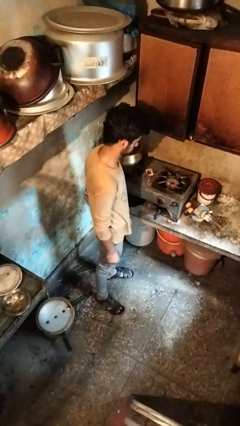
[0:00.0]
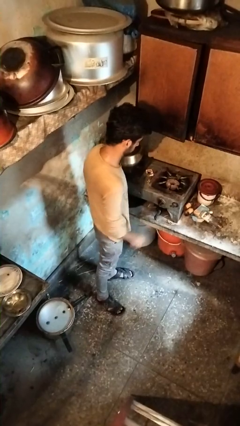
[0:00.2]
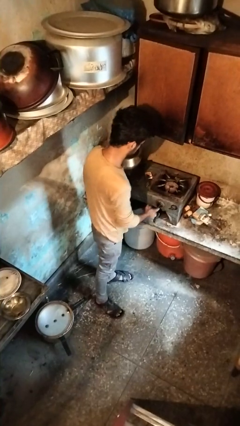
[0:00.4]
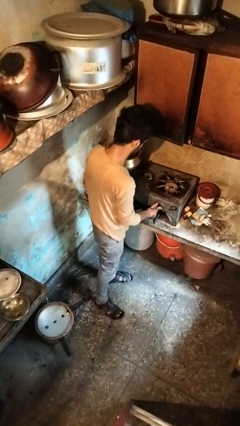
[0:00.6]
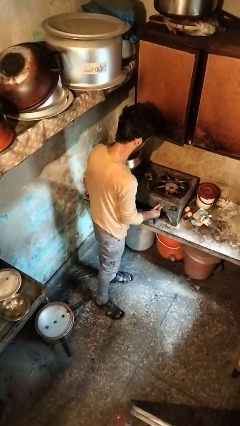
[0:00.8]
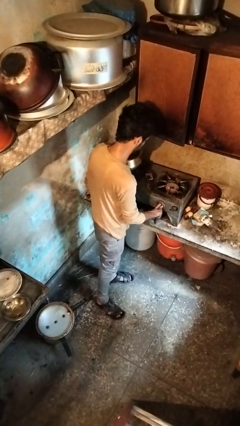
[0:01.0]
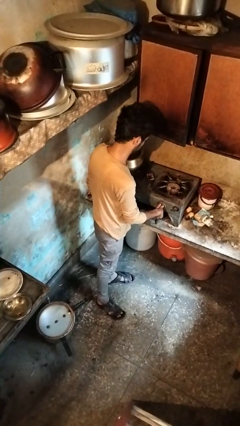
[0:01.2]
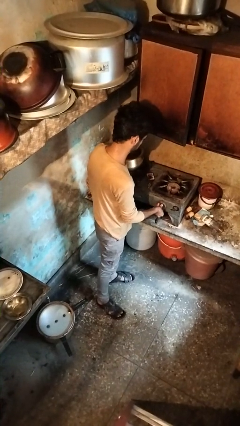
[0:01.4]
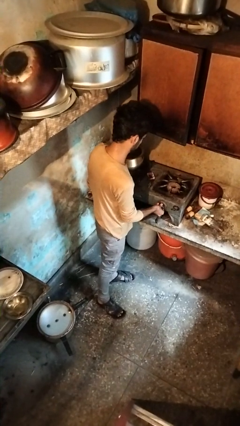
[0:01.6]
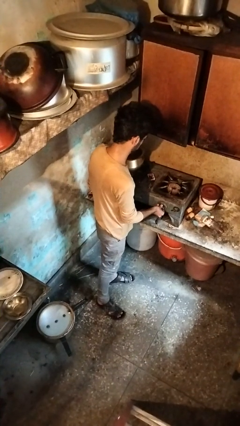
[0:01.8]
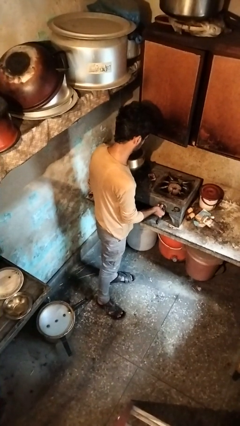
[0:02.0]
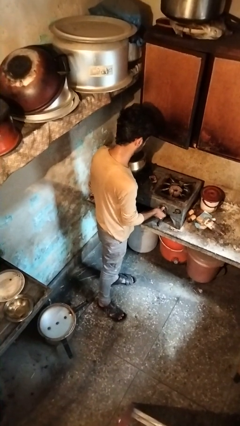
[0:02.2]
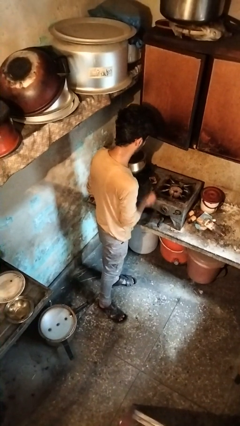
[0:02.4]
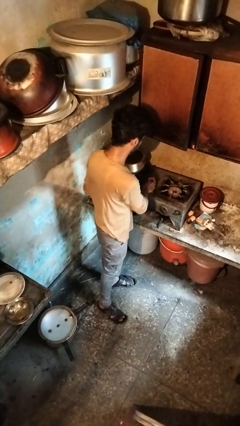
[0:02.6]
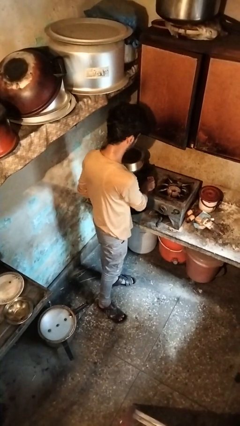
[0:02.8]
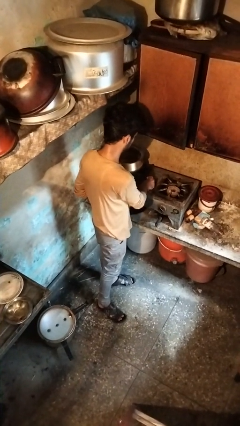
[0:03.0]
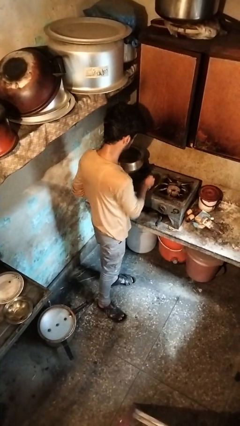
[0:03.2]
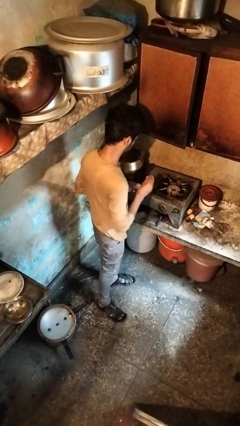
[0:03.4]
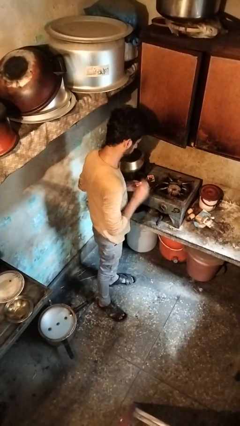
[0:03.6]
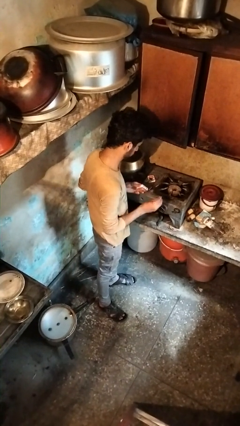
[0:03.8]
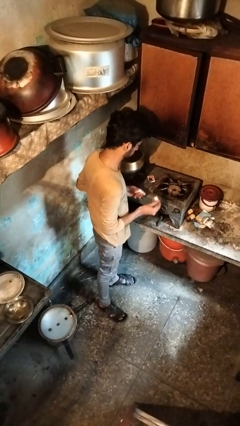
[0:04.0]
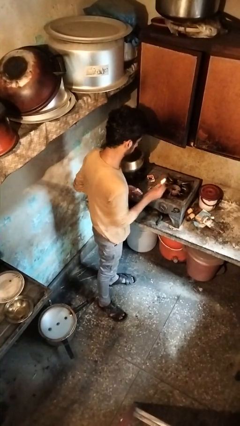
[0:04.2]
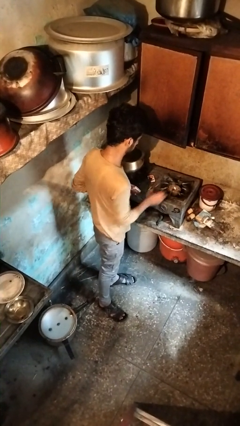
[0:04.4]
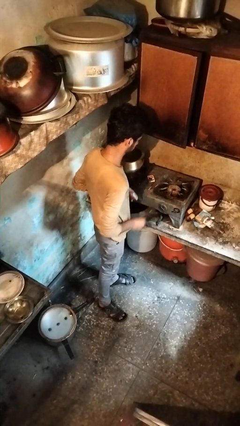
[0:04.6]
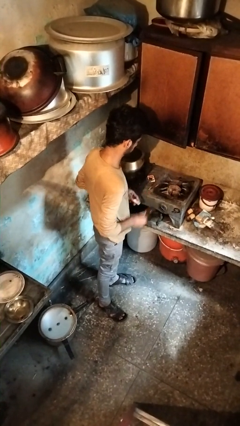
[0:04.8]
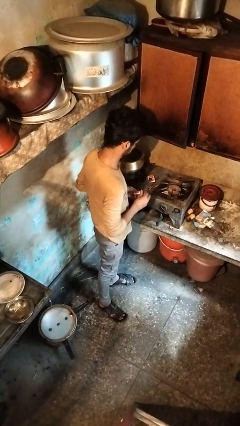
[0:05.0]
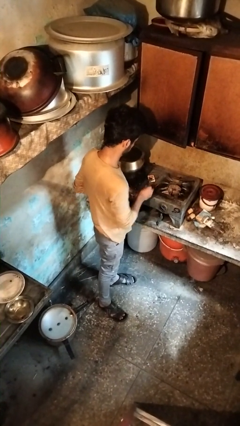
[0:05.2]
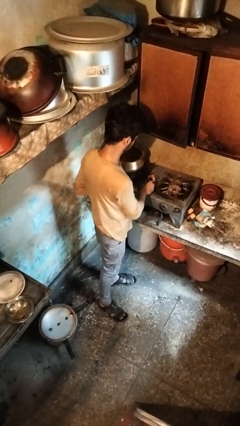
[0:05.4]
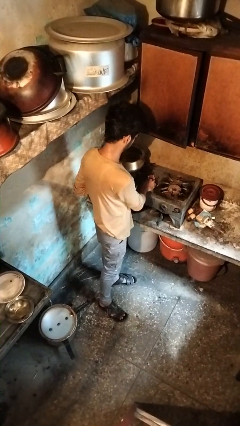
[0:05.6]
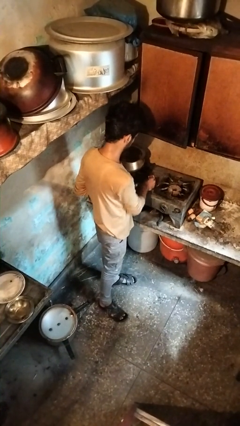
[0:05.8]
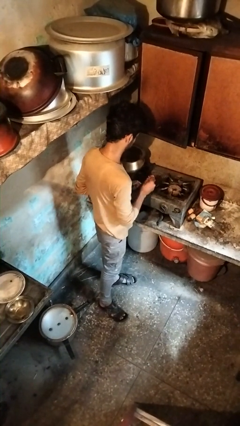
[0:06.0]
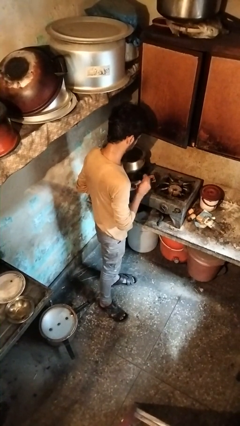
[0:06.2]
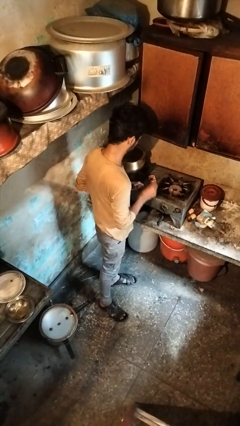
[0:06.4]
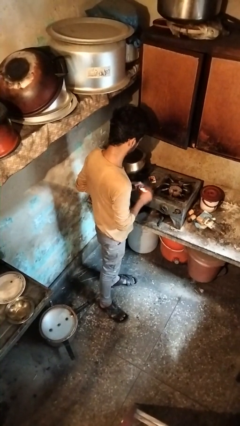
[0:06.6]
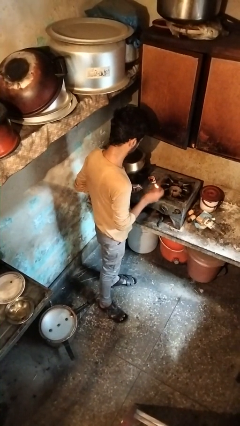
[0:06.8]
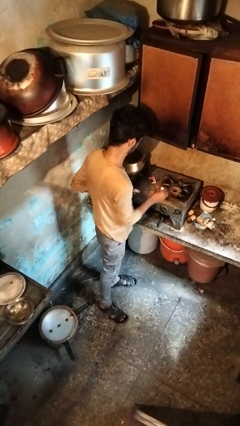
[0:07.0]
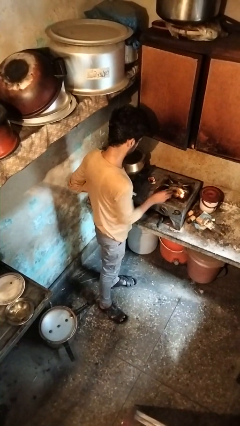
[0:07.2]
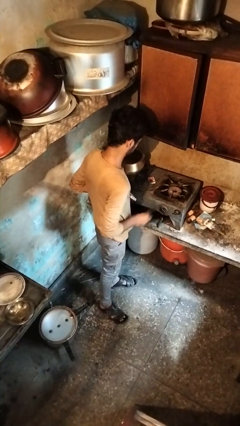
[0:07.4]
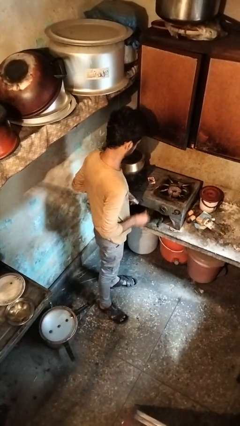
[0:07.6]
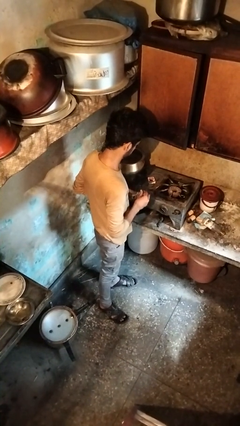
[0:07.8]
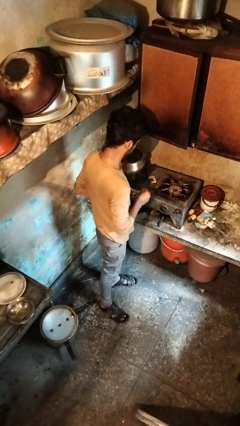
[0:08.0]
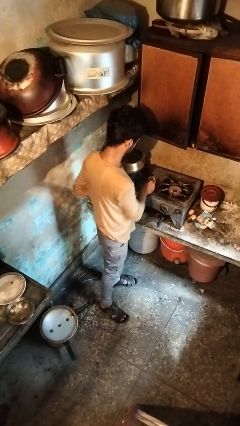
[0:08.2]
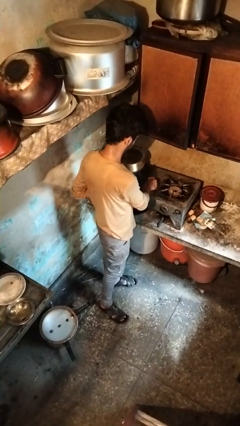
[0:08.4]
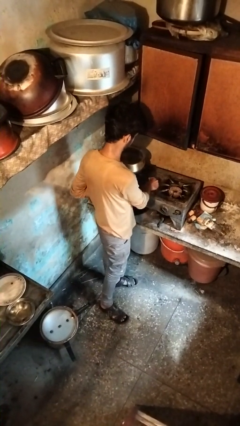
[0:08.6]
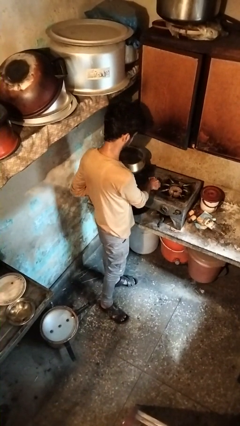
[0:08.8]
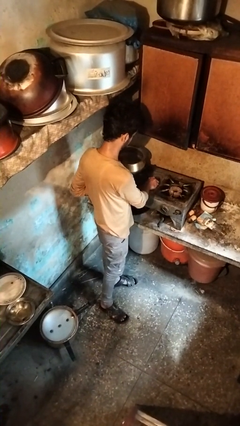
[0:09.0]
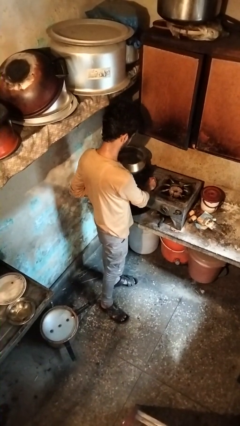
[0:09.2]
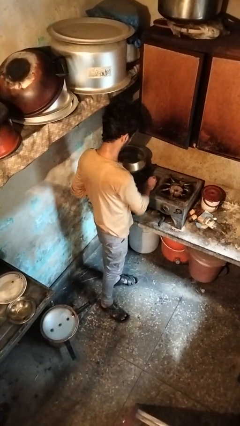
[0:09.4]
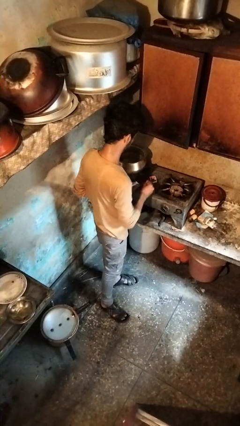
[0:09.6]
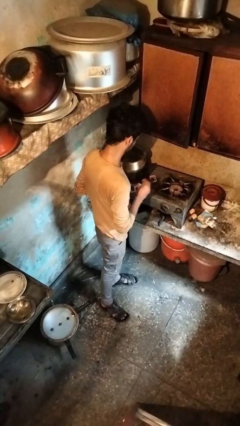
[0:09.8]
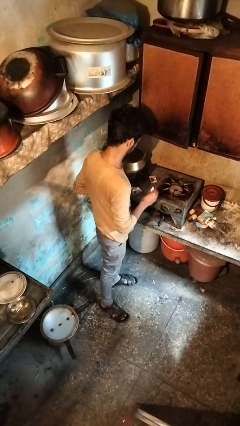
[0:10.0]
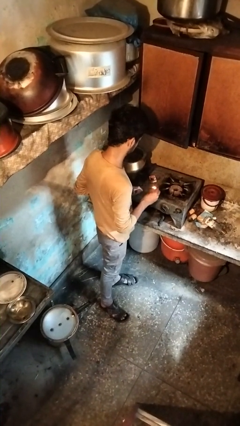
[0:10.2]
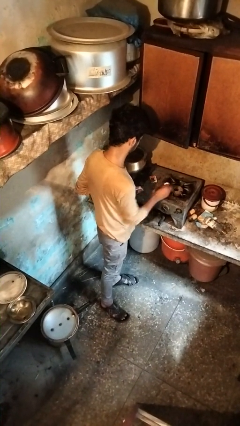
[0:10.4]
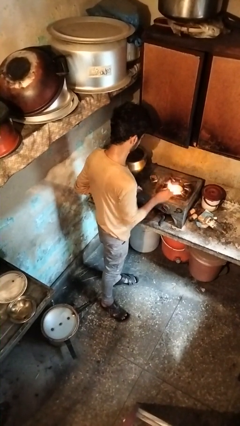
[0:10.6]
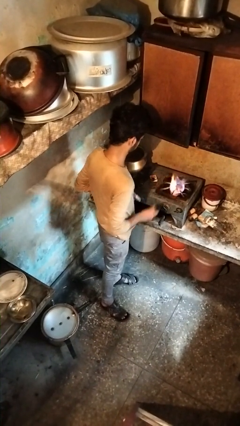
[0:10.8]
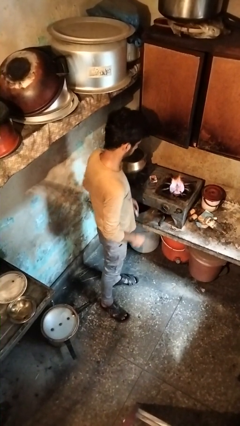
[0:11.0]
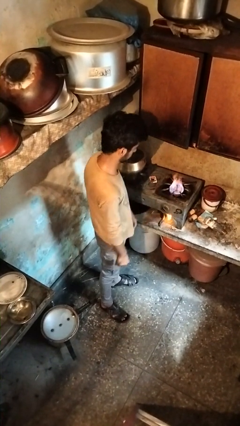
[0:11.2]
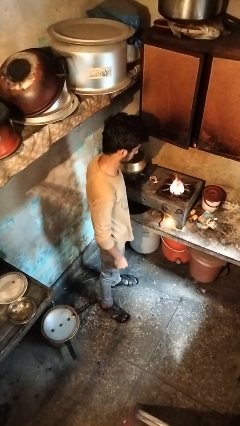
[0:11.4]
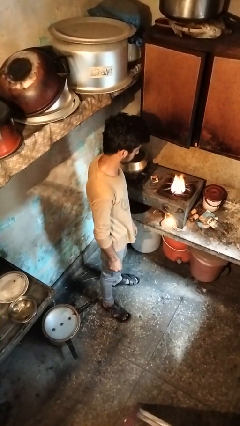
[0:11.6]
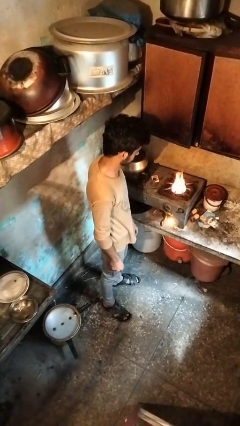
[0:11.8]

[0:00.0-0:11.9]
person turns on stovetop

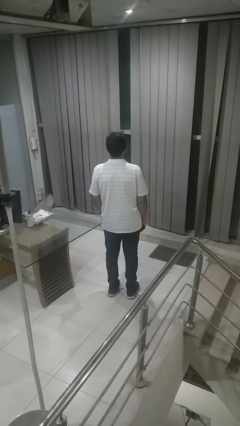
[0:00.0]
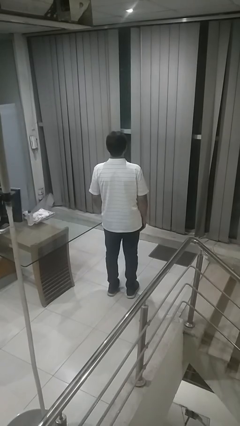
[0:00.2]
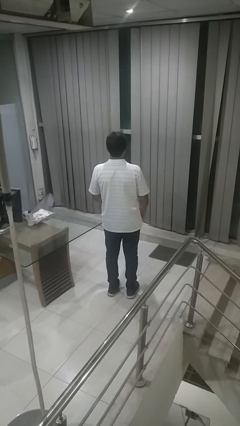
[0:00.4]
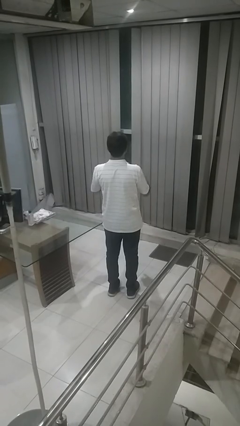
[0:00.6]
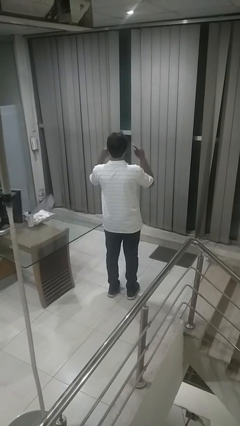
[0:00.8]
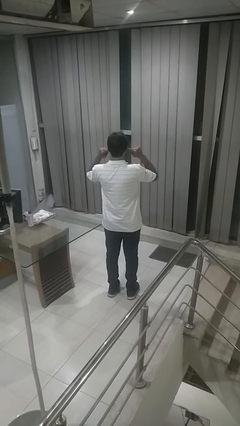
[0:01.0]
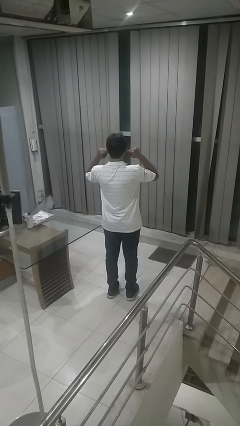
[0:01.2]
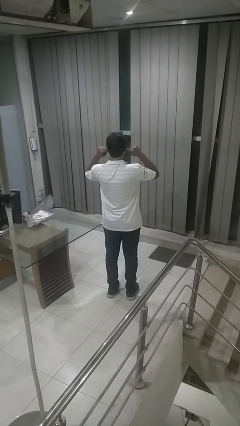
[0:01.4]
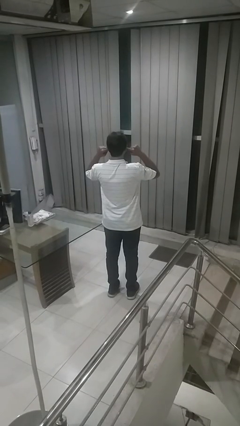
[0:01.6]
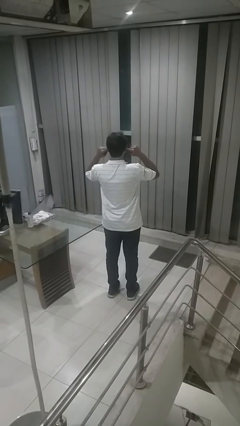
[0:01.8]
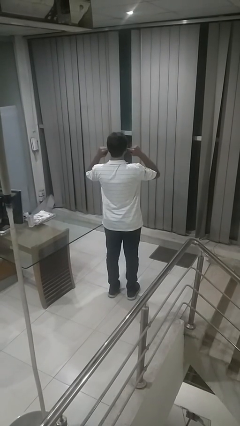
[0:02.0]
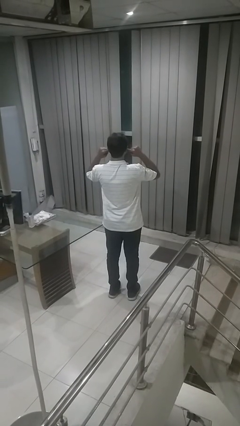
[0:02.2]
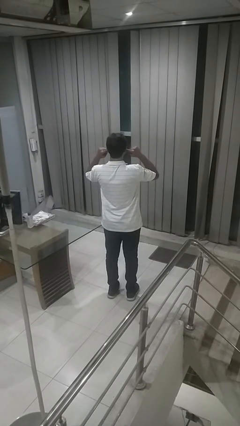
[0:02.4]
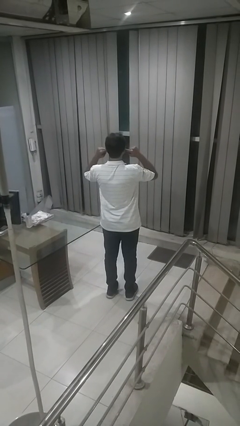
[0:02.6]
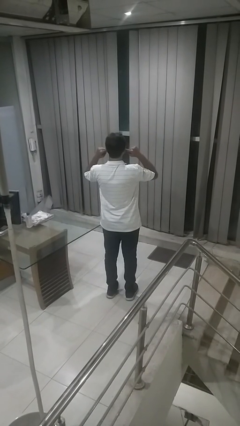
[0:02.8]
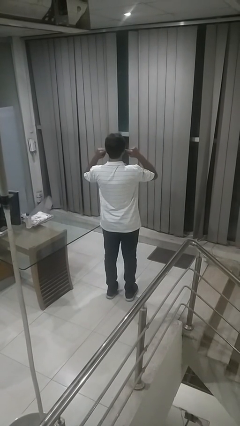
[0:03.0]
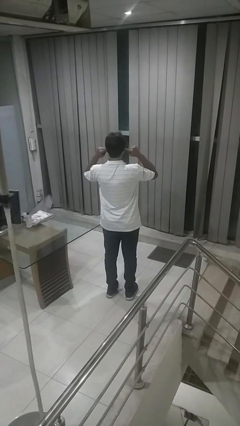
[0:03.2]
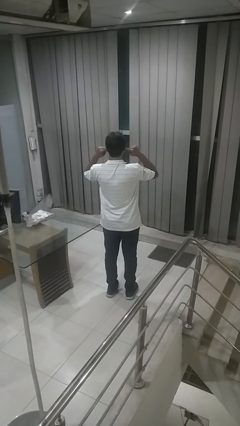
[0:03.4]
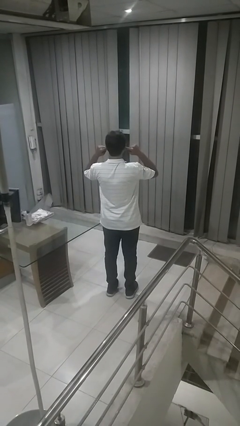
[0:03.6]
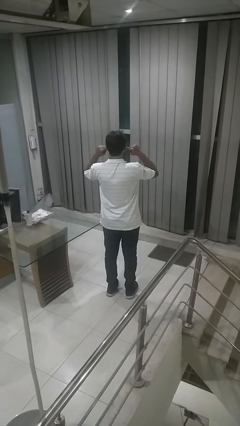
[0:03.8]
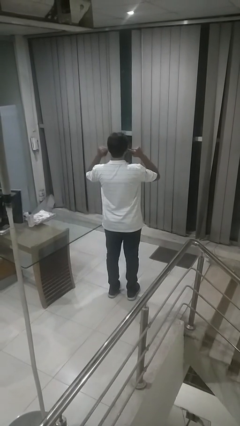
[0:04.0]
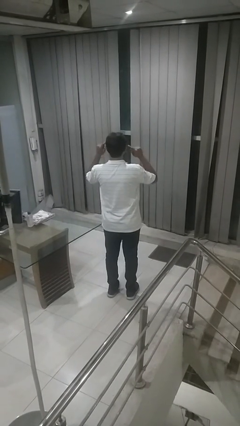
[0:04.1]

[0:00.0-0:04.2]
person puts fingers in ear

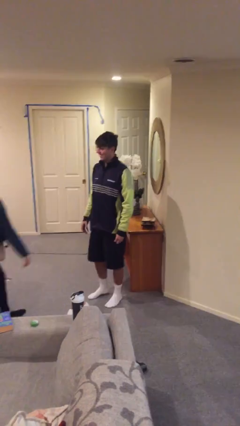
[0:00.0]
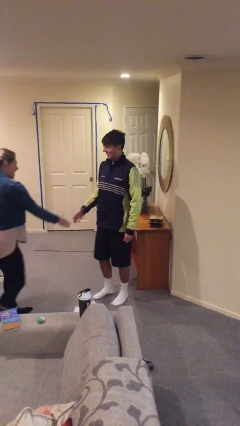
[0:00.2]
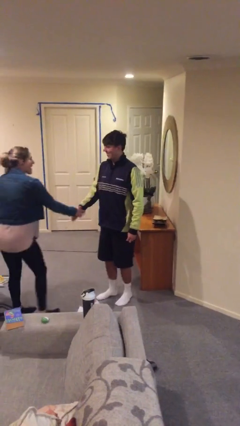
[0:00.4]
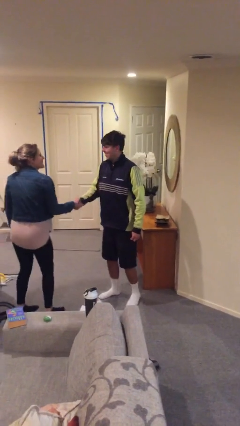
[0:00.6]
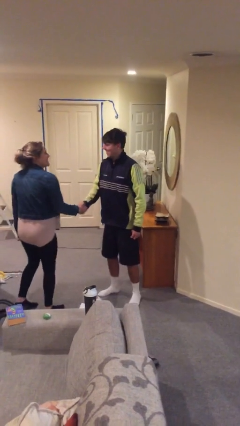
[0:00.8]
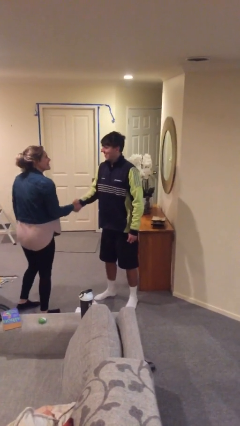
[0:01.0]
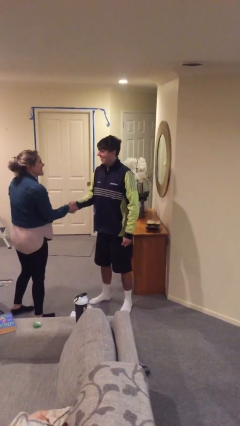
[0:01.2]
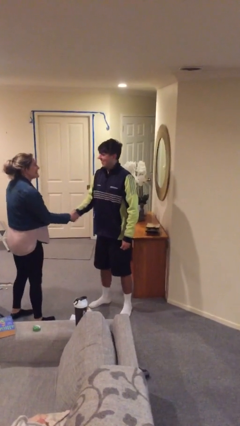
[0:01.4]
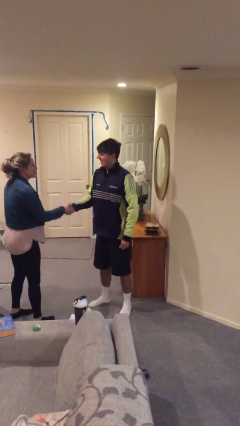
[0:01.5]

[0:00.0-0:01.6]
person shakes hand

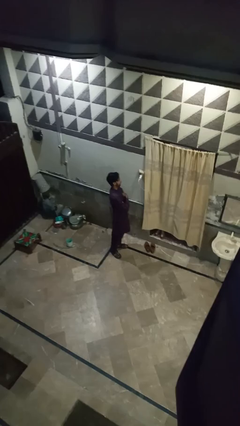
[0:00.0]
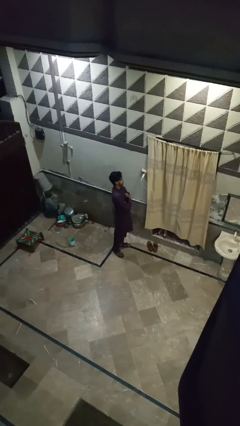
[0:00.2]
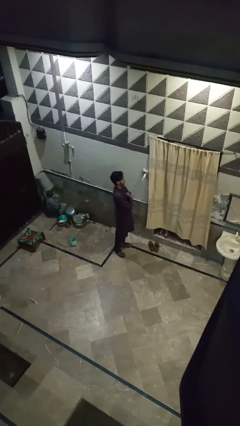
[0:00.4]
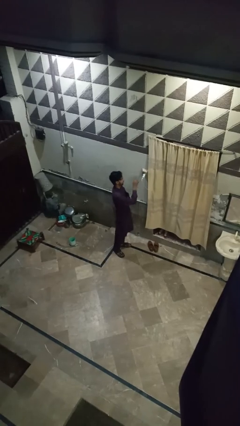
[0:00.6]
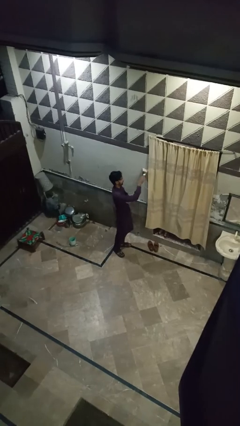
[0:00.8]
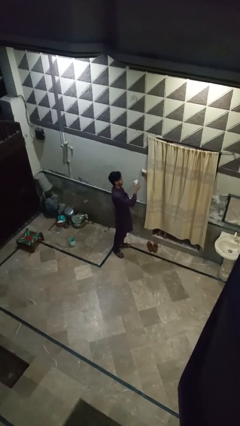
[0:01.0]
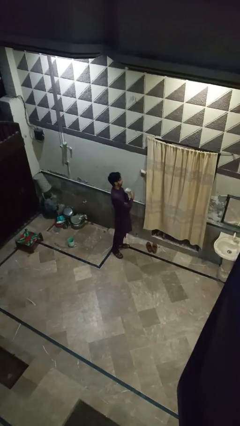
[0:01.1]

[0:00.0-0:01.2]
person unplugs from electrical socket
